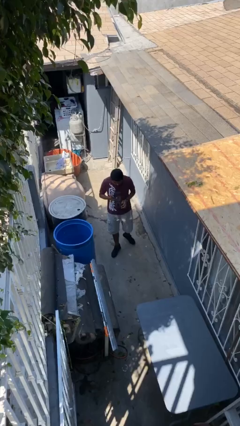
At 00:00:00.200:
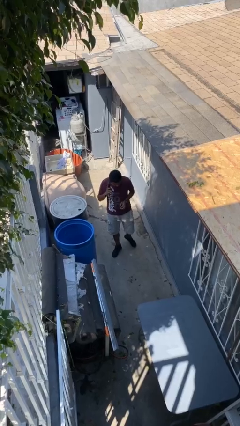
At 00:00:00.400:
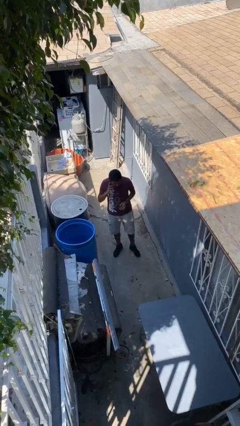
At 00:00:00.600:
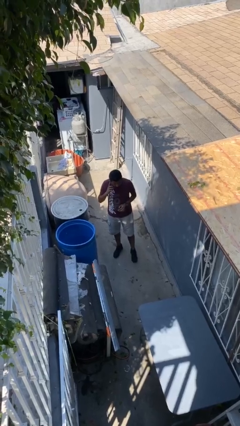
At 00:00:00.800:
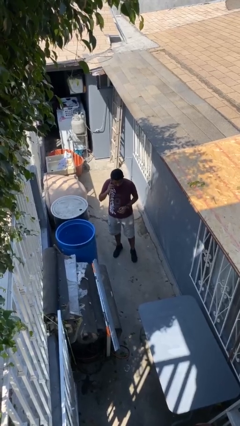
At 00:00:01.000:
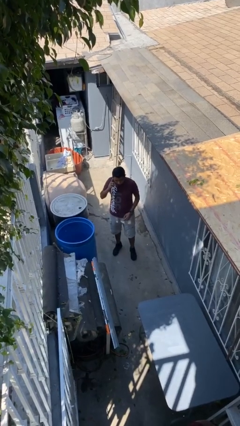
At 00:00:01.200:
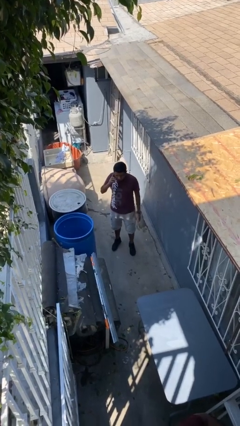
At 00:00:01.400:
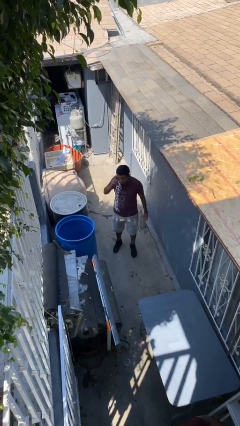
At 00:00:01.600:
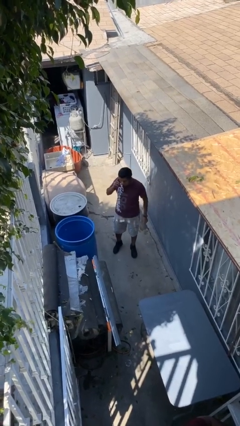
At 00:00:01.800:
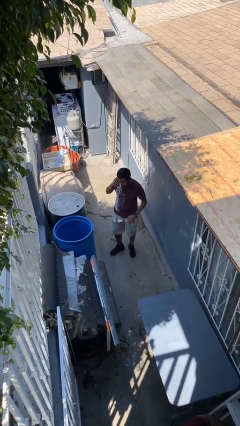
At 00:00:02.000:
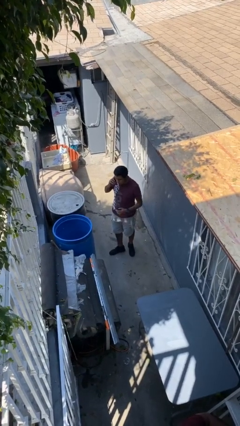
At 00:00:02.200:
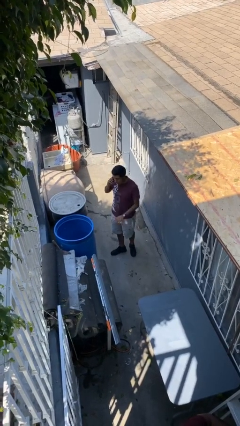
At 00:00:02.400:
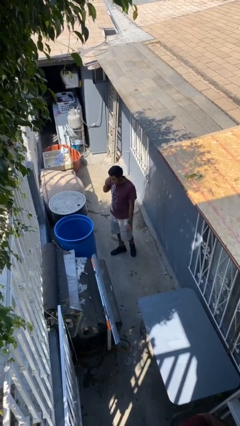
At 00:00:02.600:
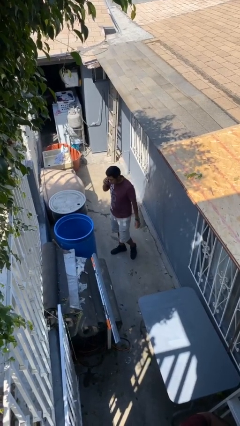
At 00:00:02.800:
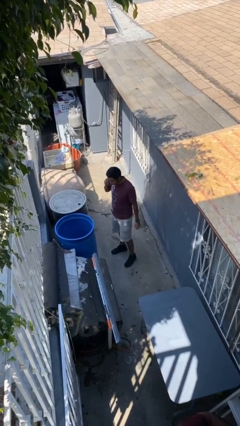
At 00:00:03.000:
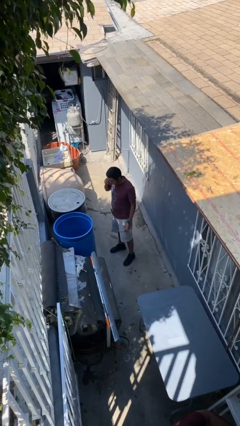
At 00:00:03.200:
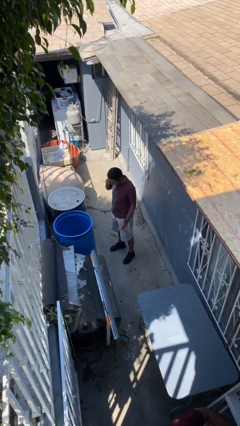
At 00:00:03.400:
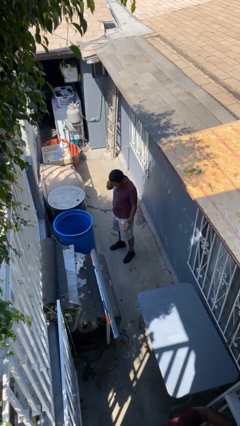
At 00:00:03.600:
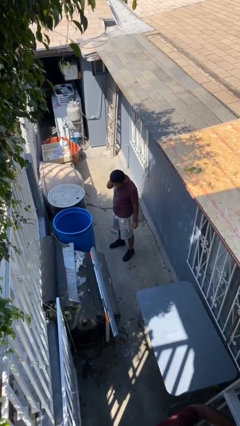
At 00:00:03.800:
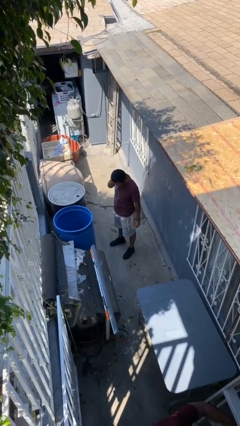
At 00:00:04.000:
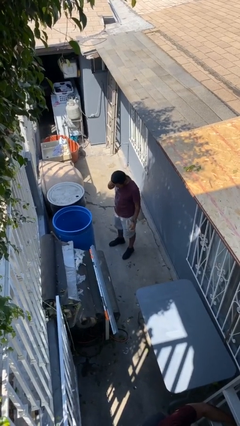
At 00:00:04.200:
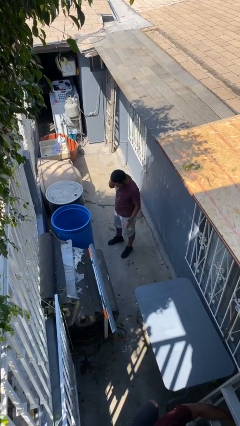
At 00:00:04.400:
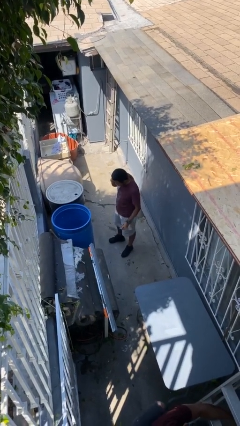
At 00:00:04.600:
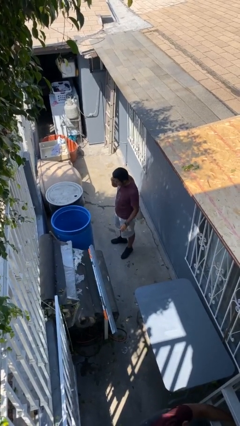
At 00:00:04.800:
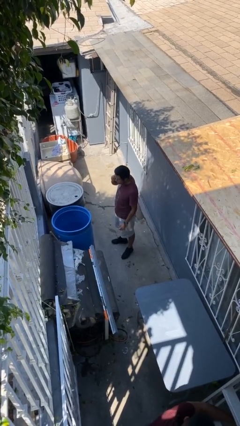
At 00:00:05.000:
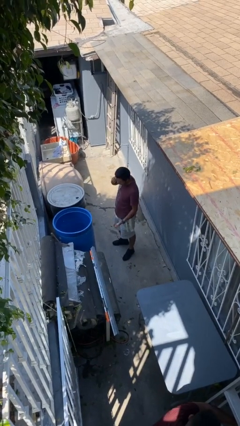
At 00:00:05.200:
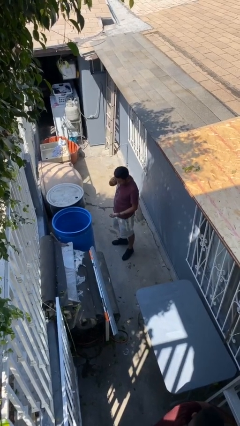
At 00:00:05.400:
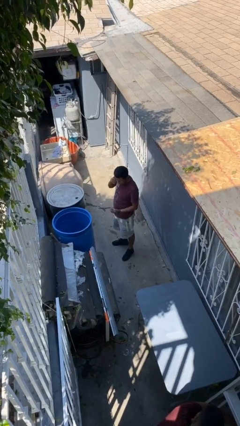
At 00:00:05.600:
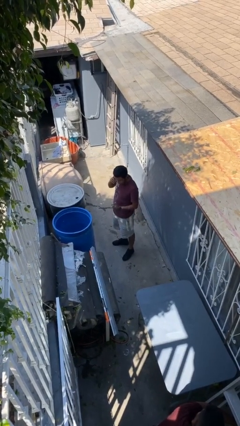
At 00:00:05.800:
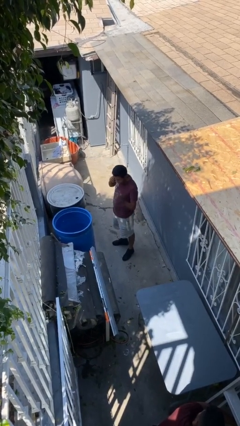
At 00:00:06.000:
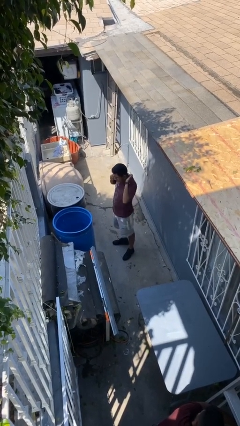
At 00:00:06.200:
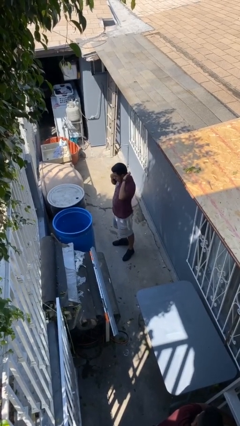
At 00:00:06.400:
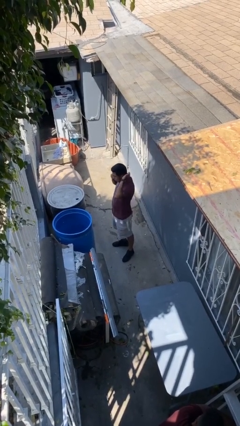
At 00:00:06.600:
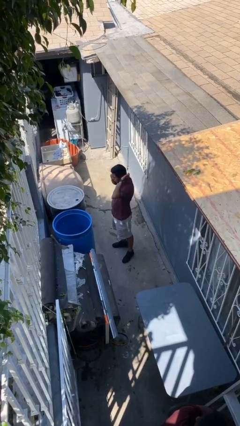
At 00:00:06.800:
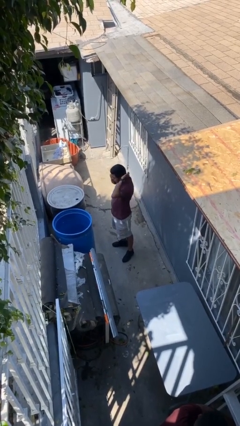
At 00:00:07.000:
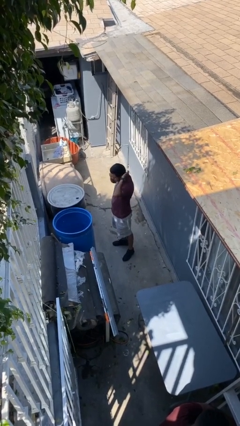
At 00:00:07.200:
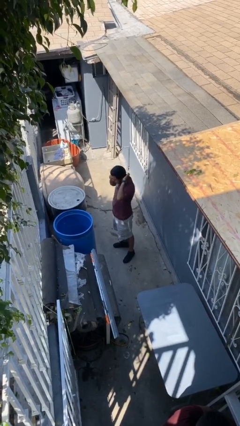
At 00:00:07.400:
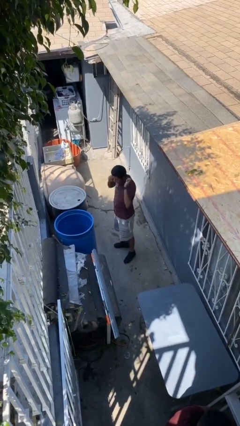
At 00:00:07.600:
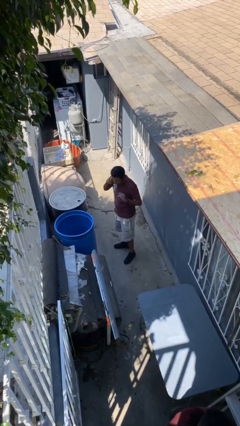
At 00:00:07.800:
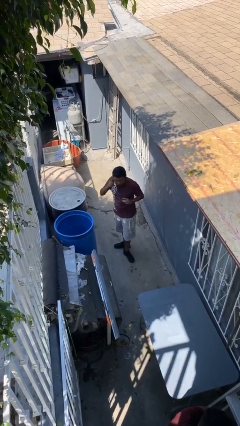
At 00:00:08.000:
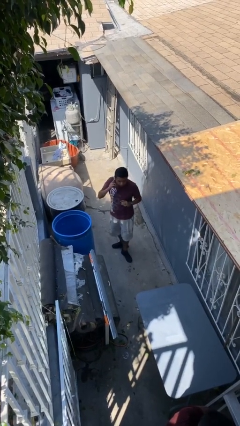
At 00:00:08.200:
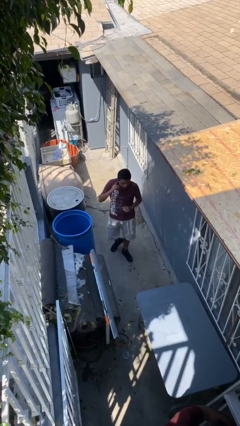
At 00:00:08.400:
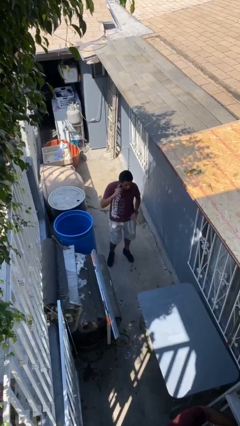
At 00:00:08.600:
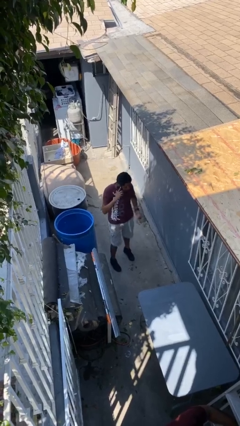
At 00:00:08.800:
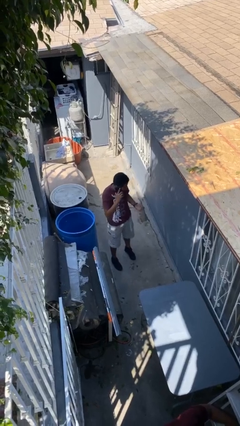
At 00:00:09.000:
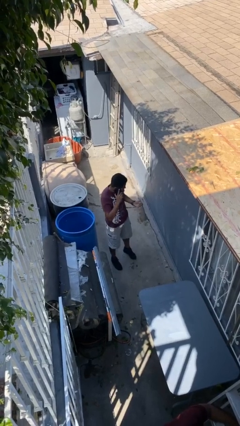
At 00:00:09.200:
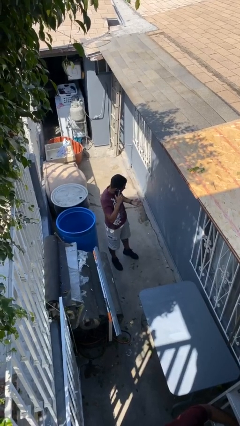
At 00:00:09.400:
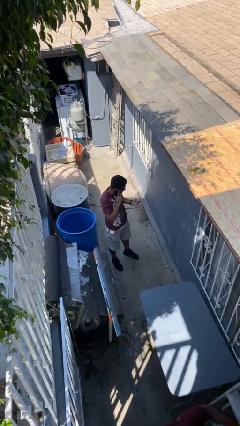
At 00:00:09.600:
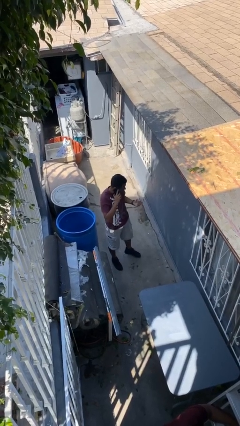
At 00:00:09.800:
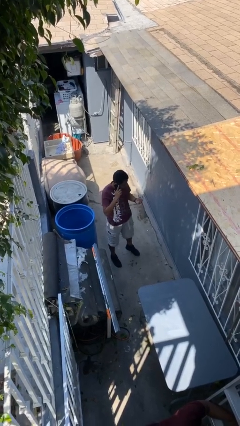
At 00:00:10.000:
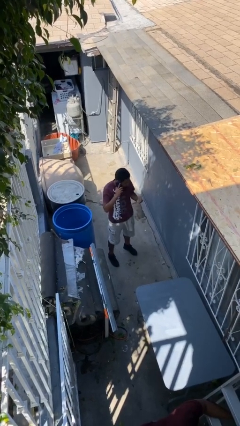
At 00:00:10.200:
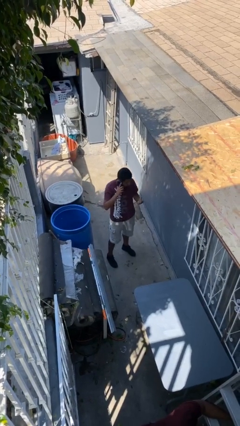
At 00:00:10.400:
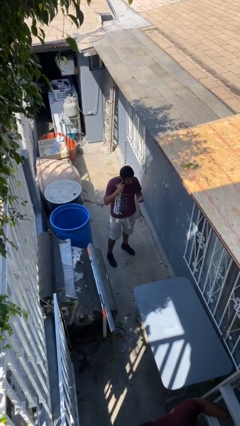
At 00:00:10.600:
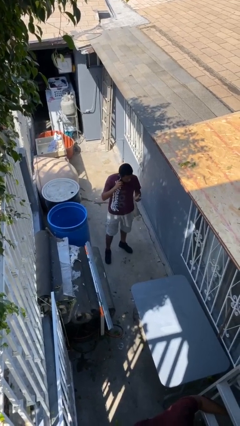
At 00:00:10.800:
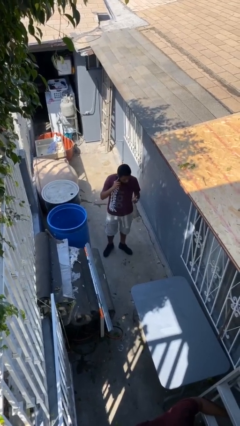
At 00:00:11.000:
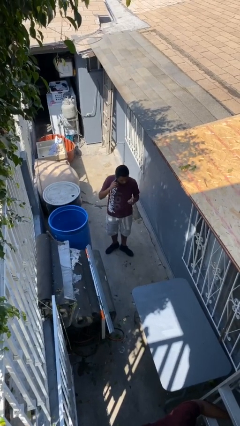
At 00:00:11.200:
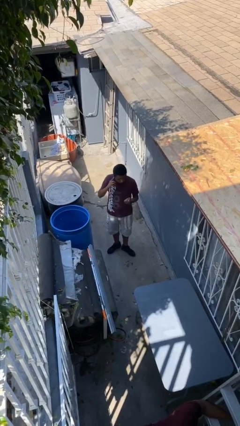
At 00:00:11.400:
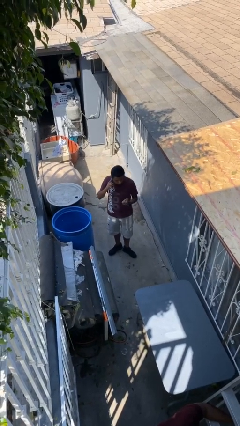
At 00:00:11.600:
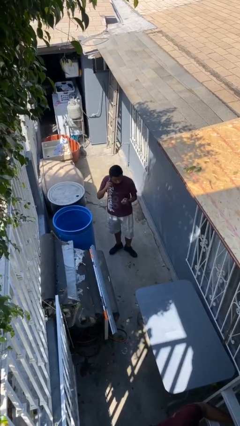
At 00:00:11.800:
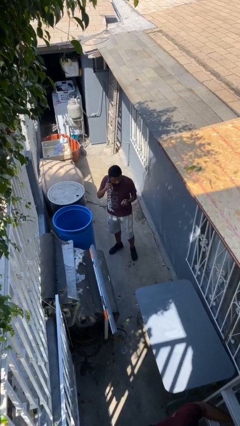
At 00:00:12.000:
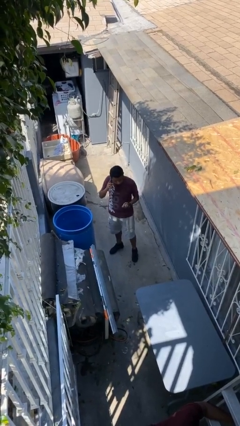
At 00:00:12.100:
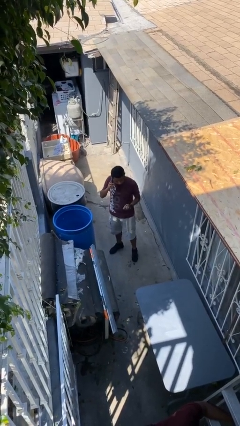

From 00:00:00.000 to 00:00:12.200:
person talks on phone

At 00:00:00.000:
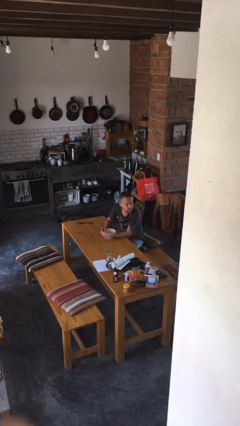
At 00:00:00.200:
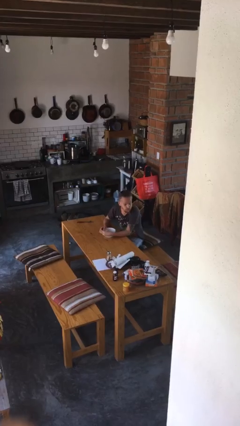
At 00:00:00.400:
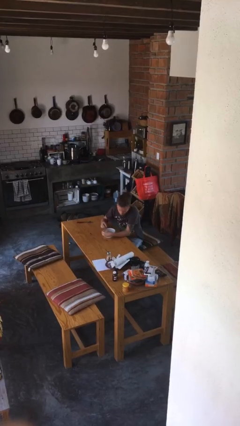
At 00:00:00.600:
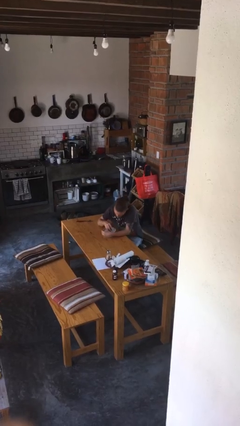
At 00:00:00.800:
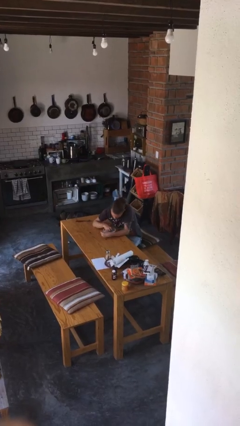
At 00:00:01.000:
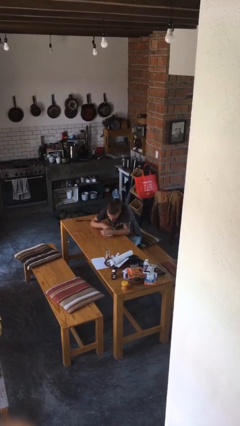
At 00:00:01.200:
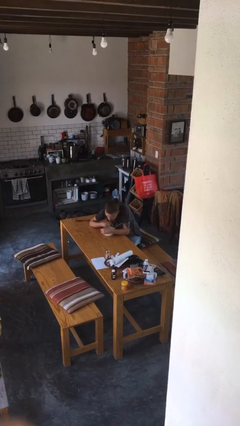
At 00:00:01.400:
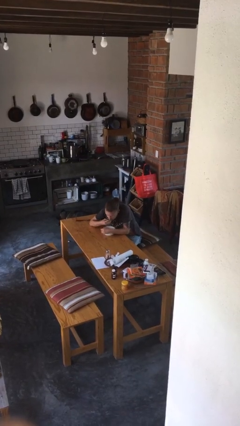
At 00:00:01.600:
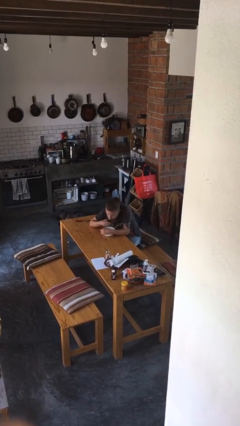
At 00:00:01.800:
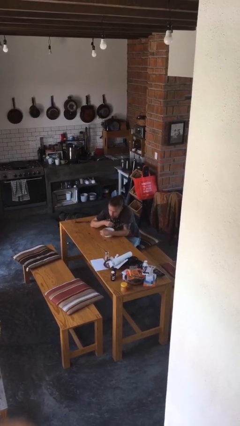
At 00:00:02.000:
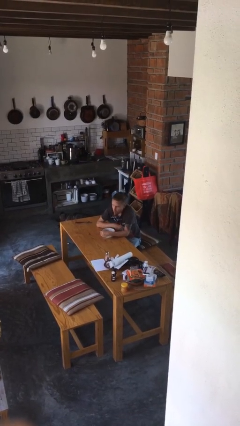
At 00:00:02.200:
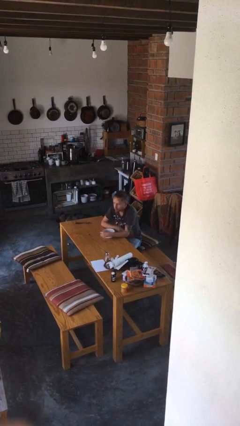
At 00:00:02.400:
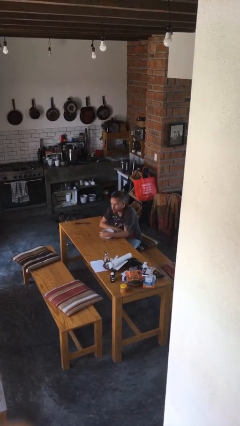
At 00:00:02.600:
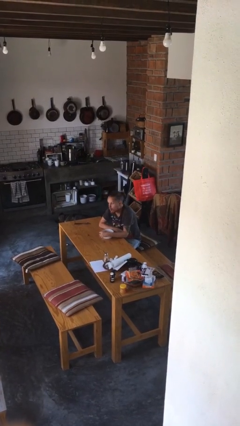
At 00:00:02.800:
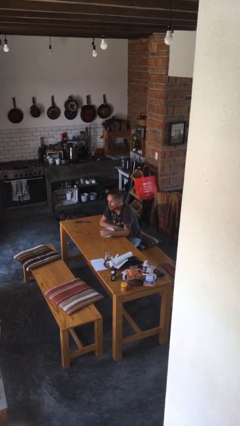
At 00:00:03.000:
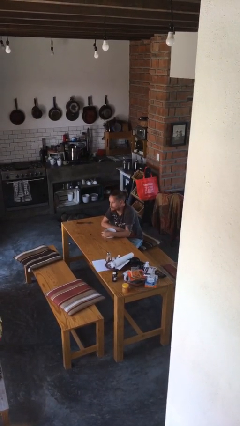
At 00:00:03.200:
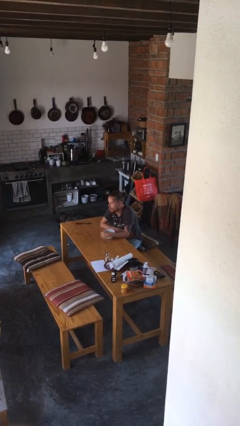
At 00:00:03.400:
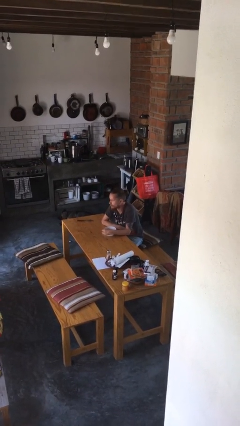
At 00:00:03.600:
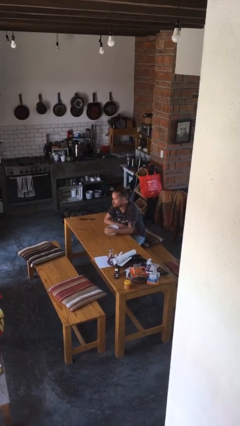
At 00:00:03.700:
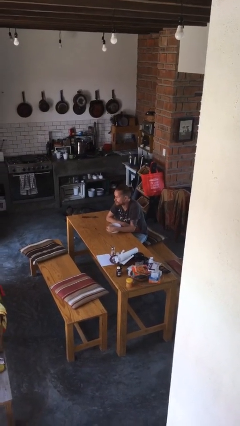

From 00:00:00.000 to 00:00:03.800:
person eats with hands

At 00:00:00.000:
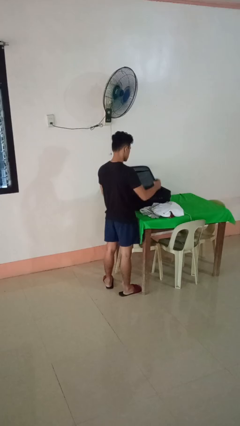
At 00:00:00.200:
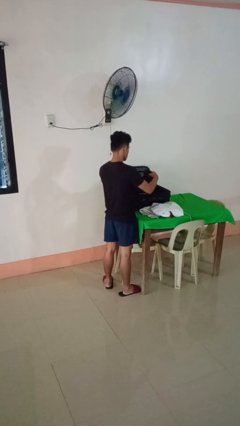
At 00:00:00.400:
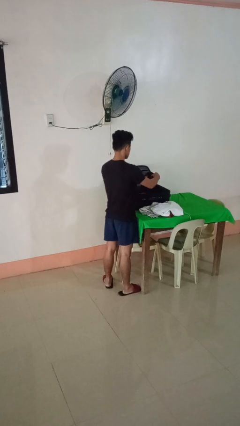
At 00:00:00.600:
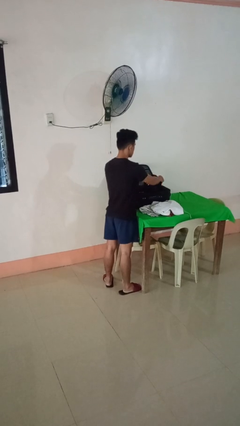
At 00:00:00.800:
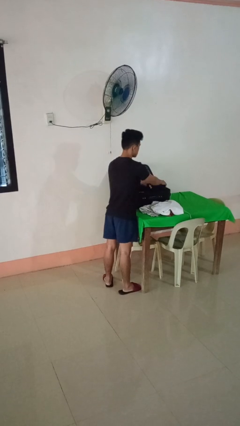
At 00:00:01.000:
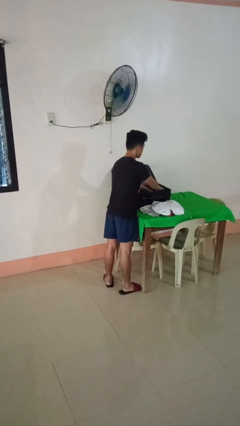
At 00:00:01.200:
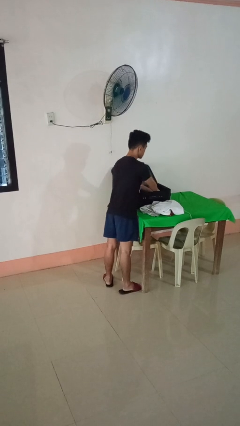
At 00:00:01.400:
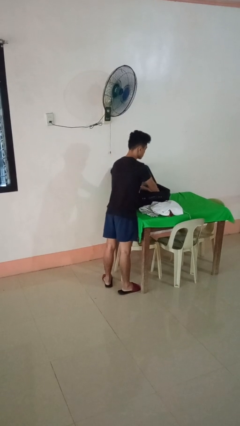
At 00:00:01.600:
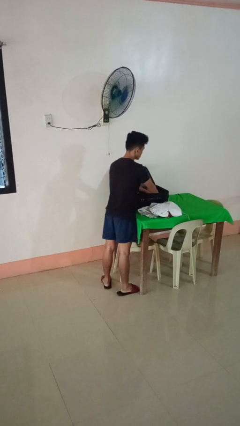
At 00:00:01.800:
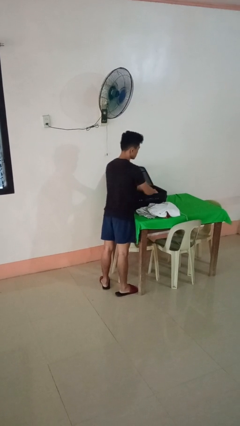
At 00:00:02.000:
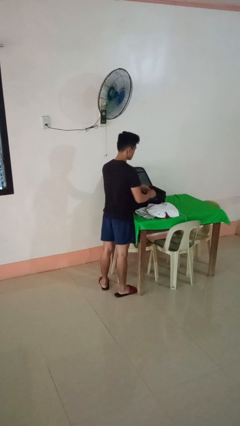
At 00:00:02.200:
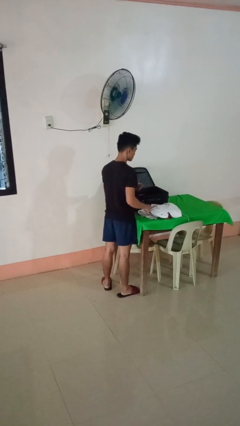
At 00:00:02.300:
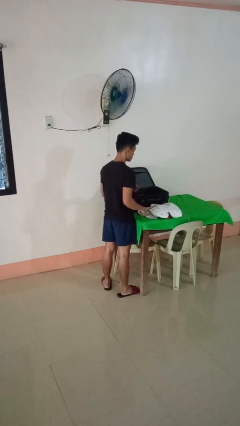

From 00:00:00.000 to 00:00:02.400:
person loads clothes into suitcase
